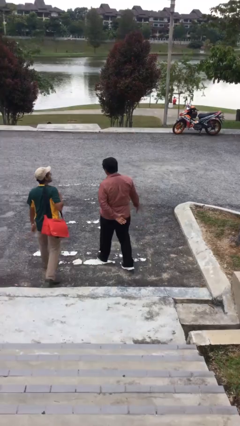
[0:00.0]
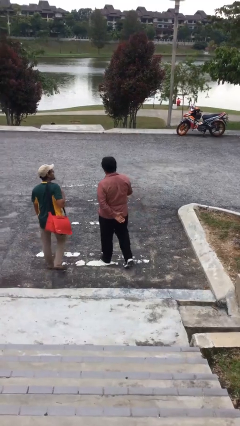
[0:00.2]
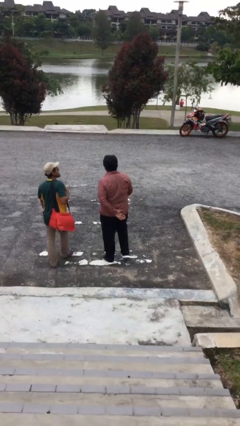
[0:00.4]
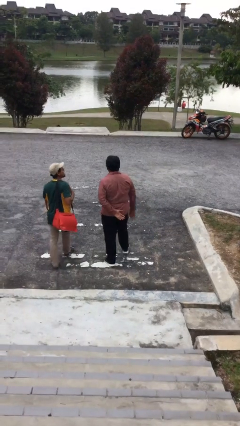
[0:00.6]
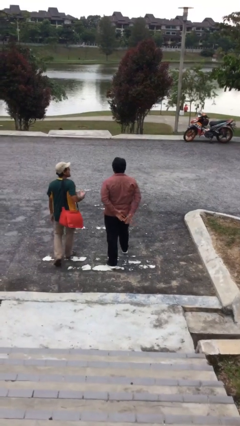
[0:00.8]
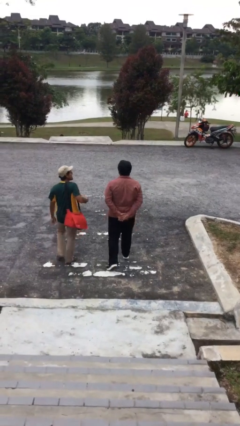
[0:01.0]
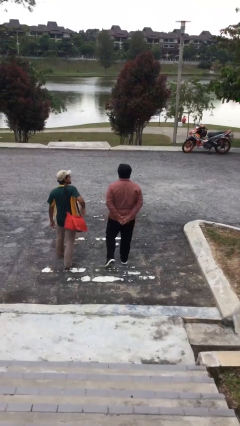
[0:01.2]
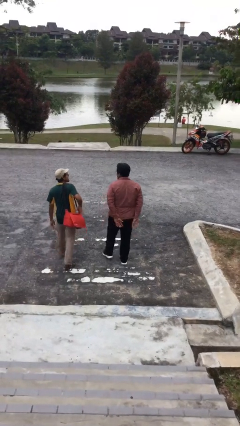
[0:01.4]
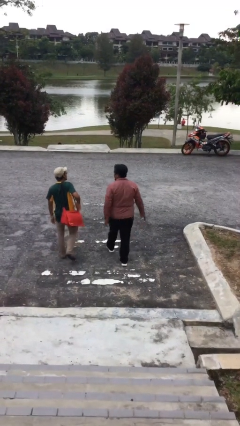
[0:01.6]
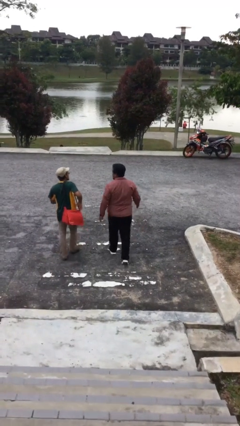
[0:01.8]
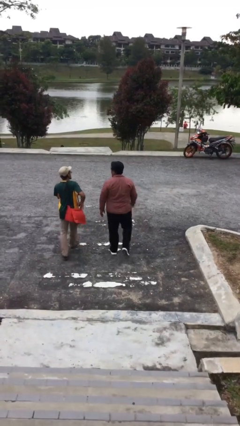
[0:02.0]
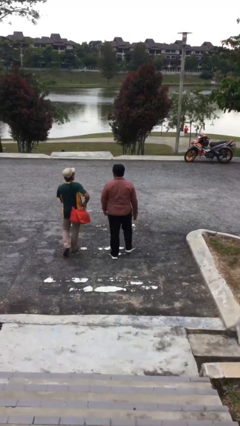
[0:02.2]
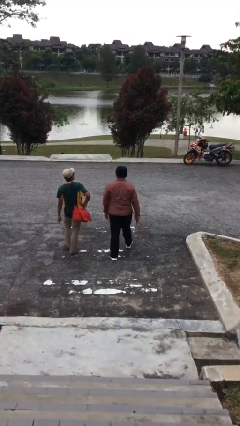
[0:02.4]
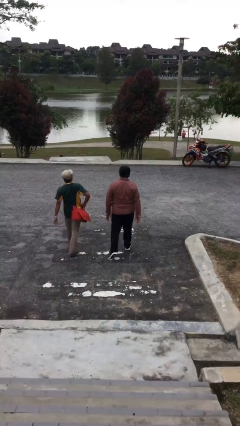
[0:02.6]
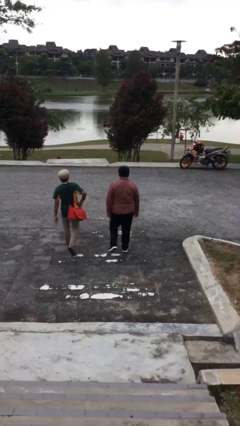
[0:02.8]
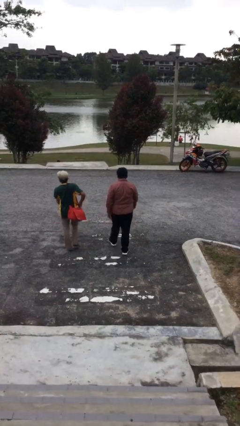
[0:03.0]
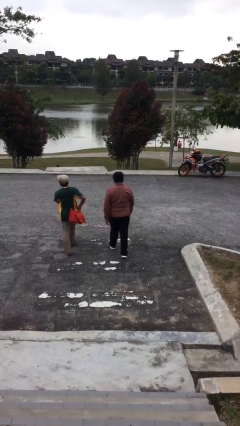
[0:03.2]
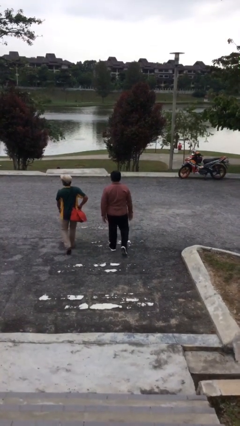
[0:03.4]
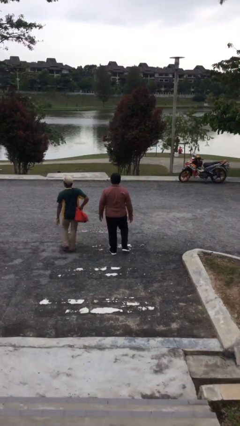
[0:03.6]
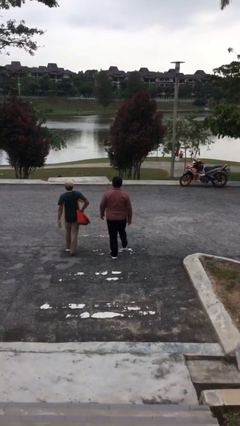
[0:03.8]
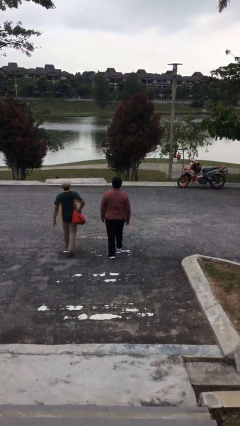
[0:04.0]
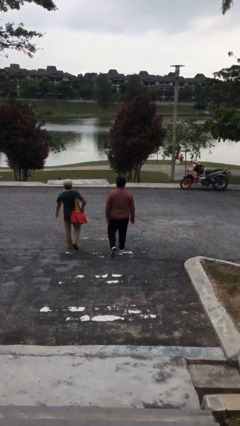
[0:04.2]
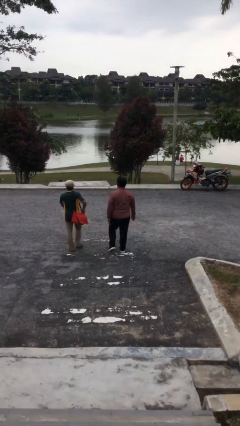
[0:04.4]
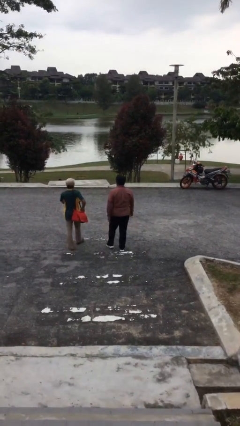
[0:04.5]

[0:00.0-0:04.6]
person talks to person

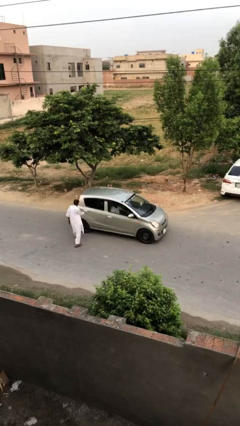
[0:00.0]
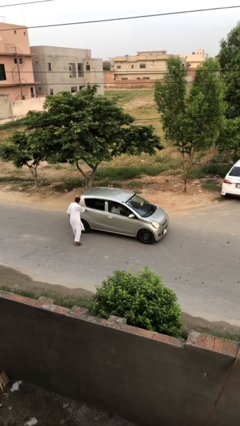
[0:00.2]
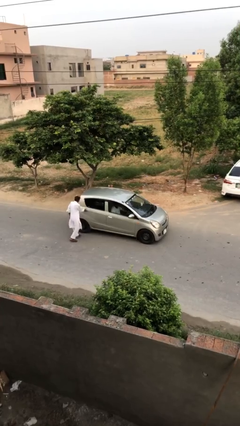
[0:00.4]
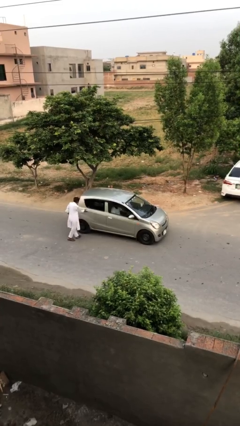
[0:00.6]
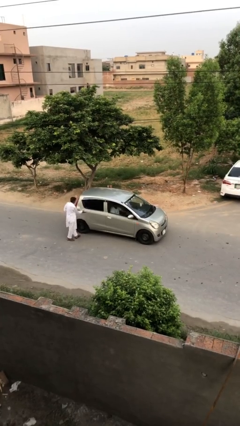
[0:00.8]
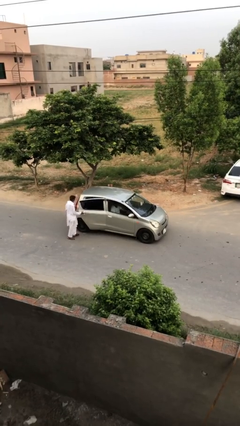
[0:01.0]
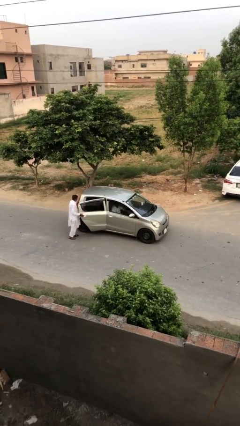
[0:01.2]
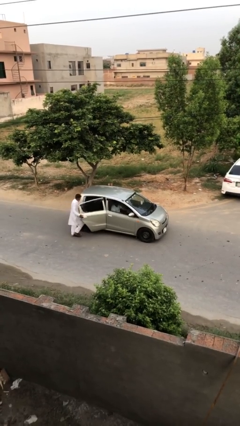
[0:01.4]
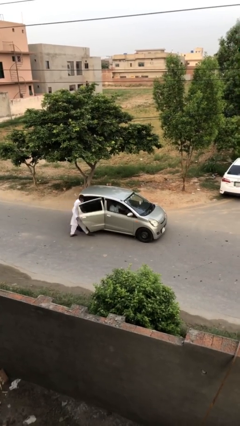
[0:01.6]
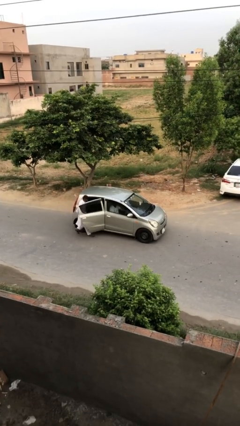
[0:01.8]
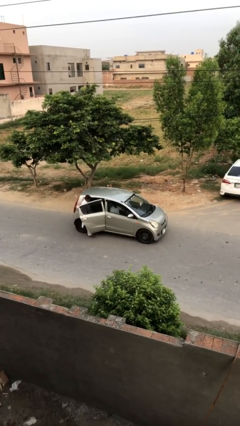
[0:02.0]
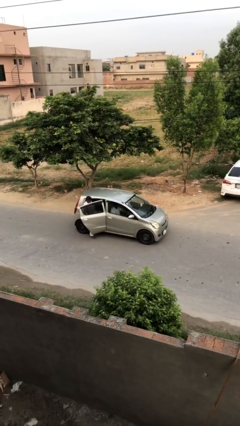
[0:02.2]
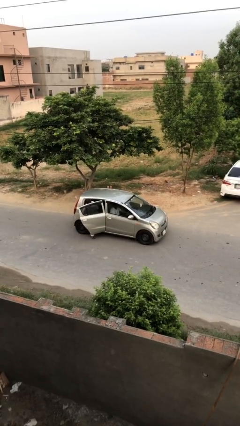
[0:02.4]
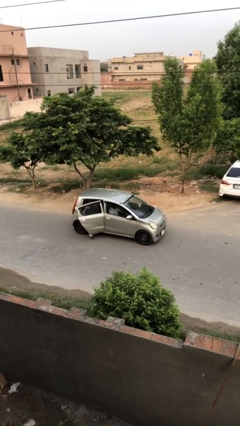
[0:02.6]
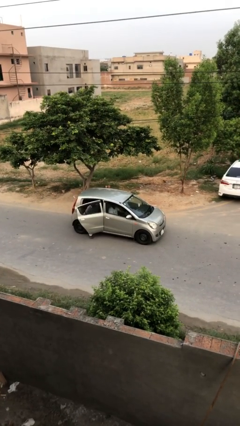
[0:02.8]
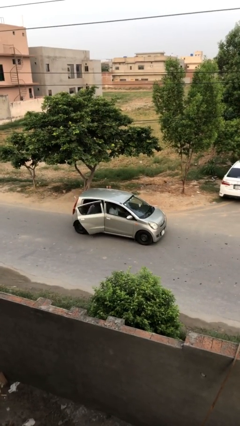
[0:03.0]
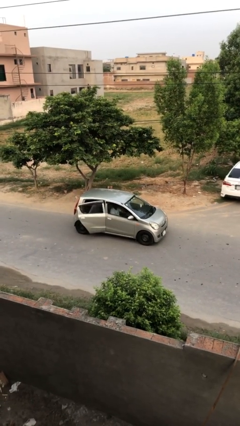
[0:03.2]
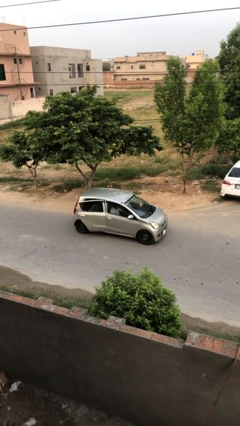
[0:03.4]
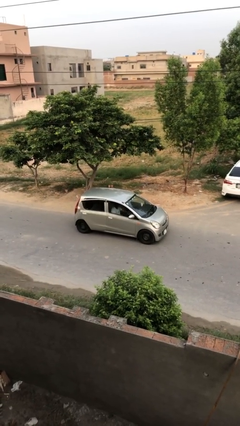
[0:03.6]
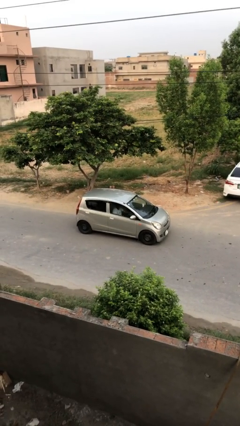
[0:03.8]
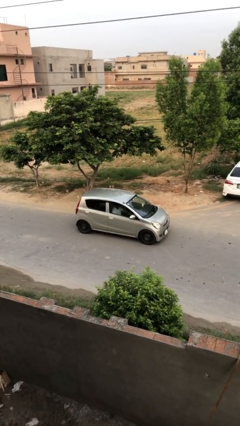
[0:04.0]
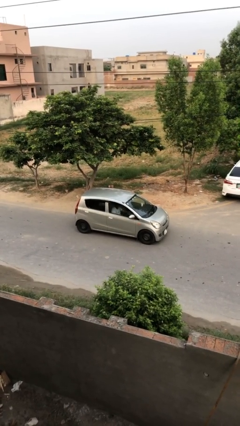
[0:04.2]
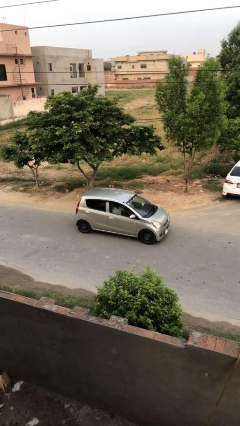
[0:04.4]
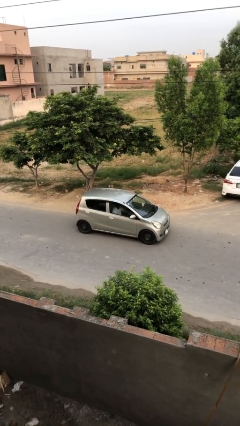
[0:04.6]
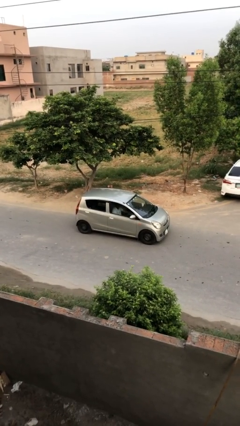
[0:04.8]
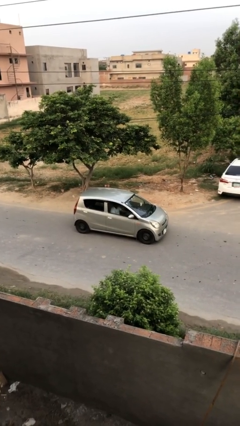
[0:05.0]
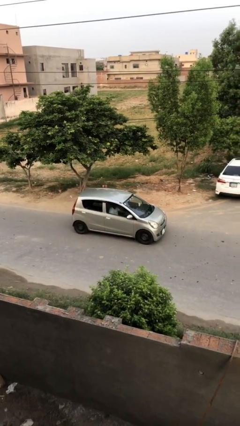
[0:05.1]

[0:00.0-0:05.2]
car picks up person

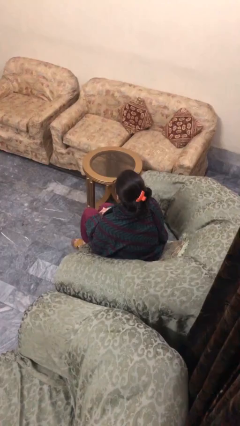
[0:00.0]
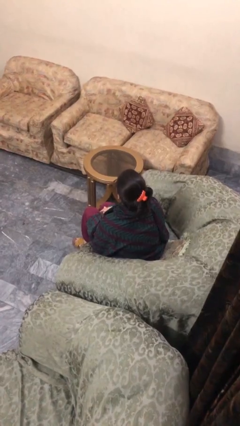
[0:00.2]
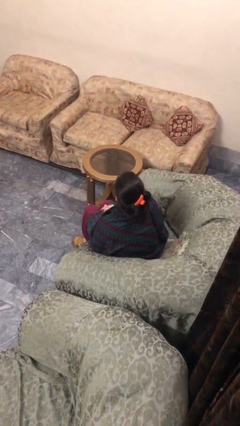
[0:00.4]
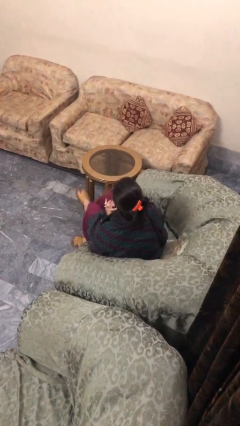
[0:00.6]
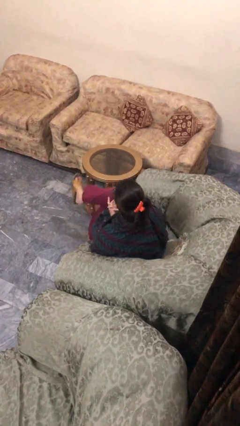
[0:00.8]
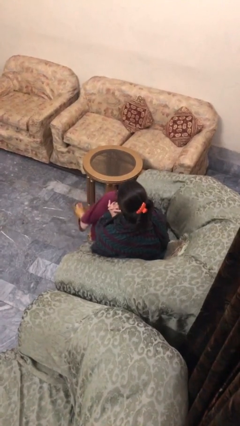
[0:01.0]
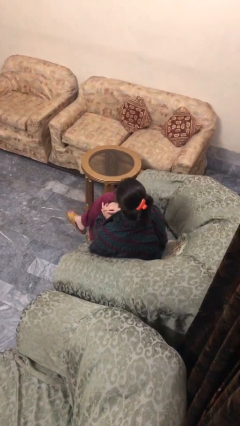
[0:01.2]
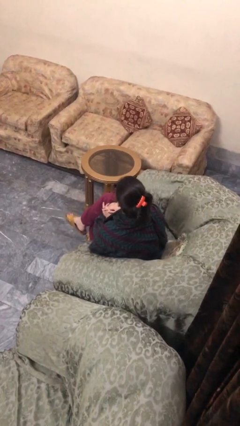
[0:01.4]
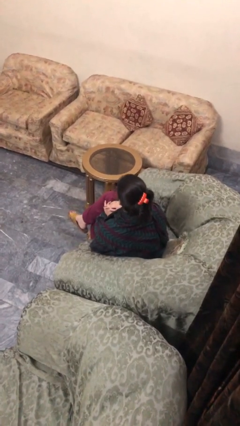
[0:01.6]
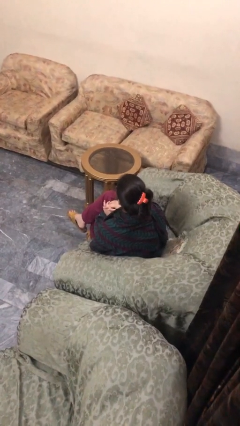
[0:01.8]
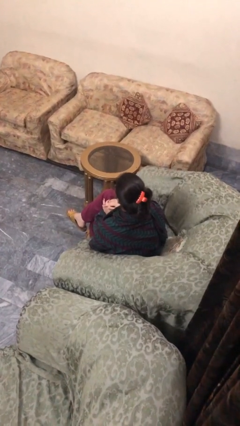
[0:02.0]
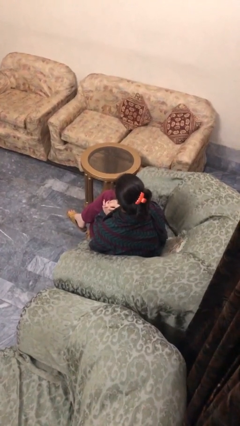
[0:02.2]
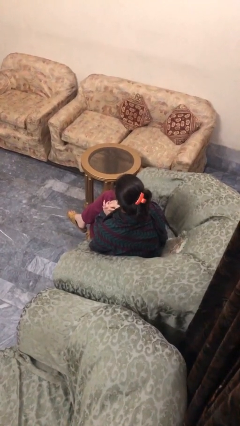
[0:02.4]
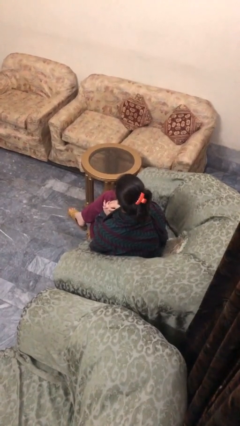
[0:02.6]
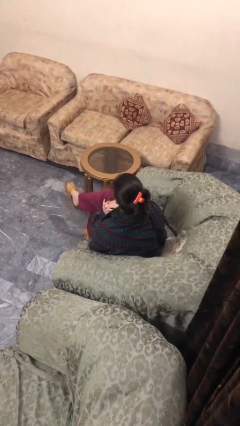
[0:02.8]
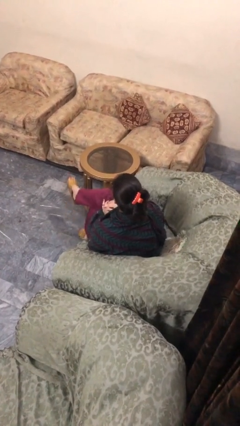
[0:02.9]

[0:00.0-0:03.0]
person crosses legs

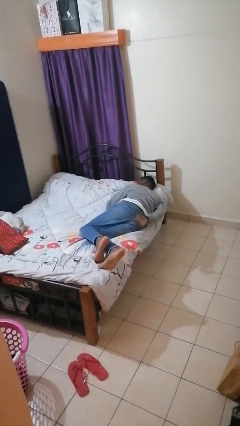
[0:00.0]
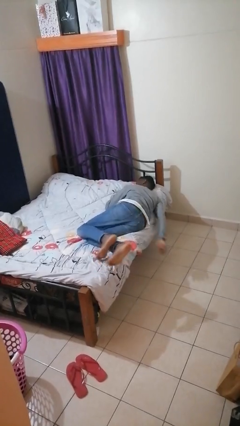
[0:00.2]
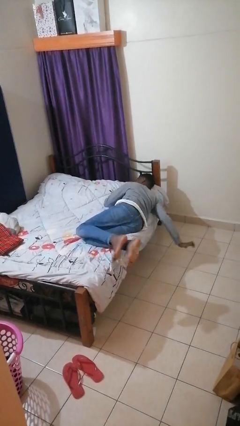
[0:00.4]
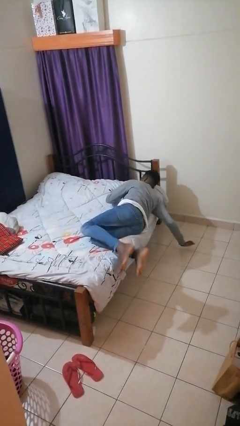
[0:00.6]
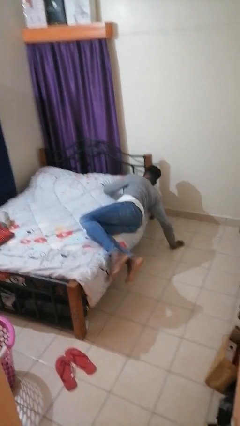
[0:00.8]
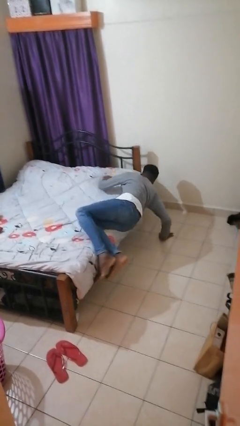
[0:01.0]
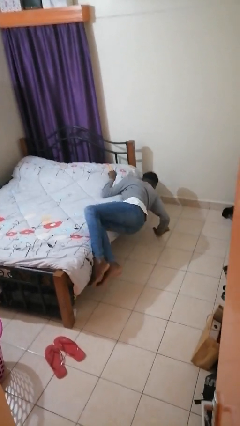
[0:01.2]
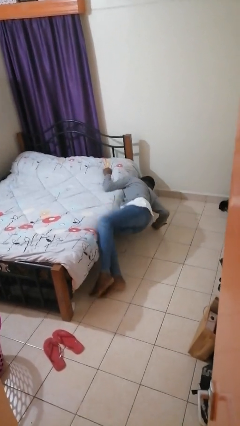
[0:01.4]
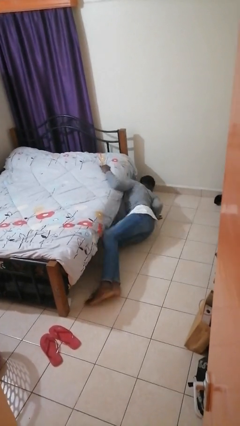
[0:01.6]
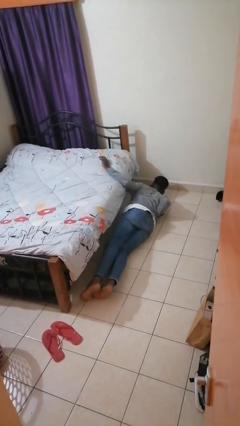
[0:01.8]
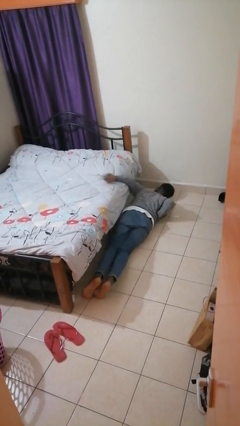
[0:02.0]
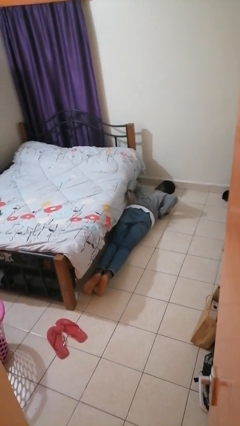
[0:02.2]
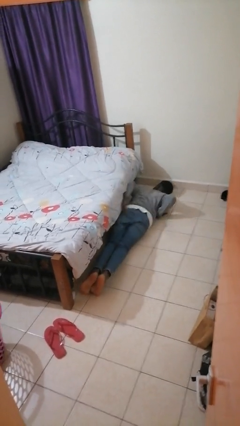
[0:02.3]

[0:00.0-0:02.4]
person falls from bed

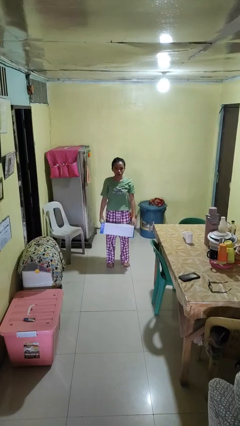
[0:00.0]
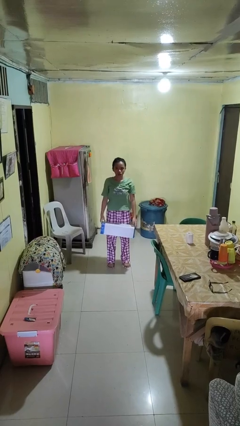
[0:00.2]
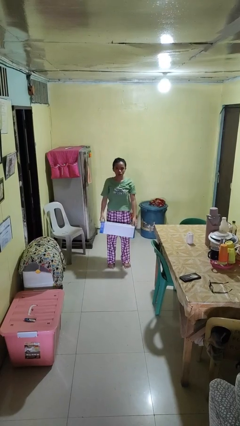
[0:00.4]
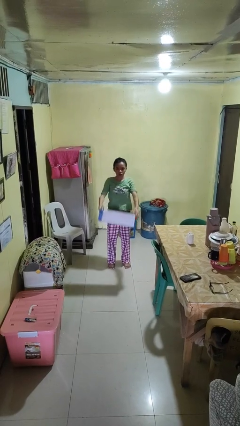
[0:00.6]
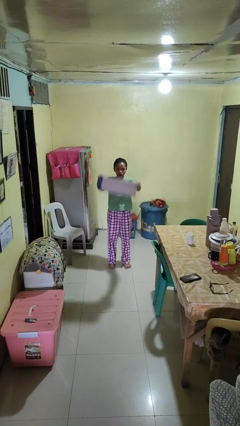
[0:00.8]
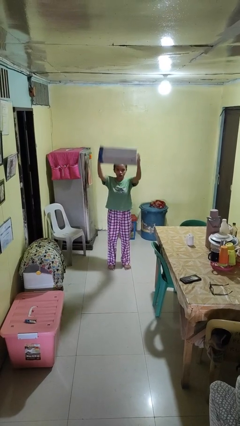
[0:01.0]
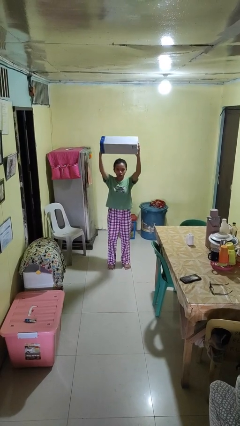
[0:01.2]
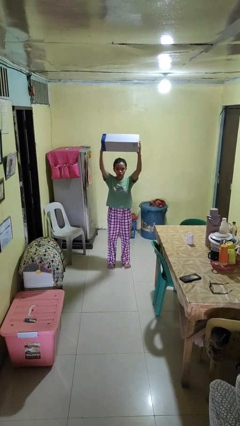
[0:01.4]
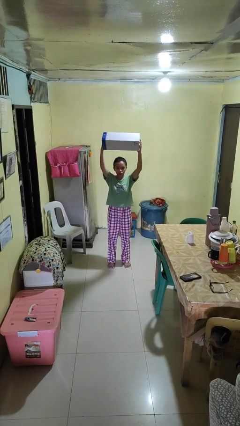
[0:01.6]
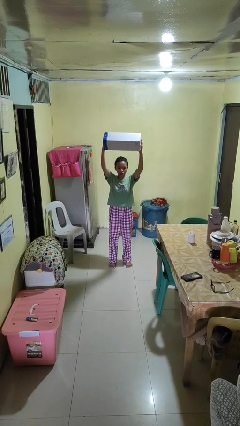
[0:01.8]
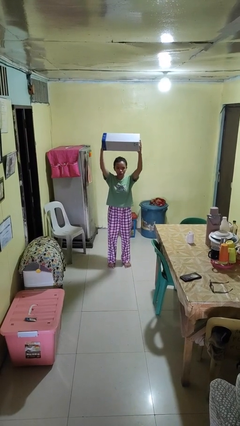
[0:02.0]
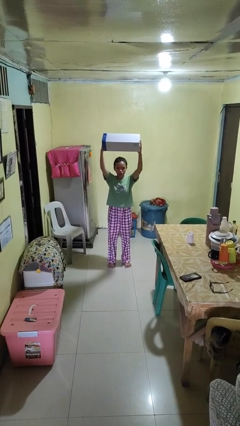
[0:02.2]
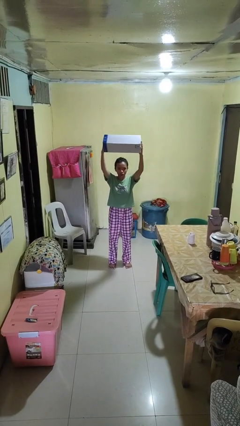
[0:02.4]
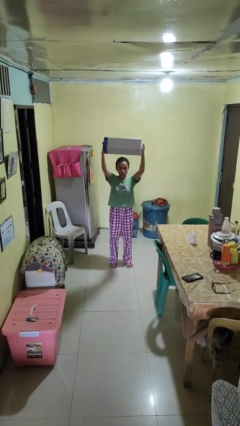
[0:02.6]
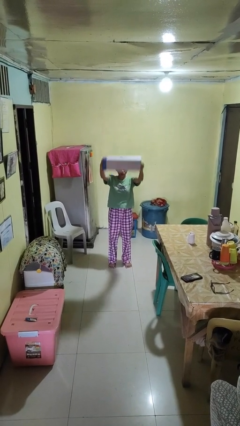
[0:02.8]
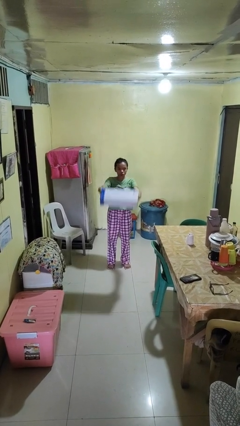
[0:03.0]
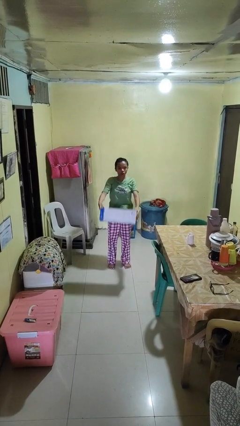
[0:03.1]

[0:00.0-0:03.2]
person holds object above head
